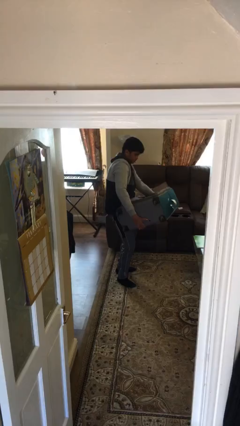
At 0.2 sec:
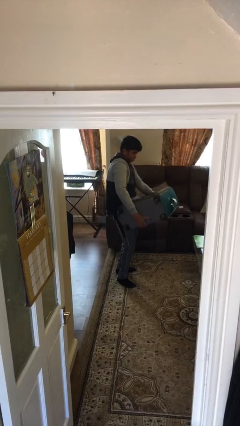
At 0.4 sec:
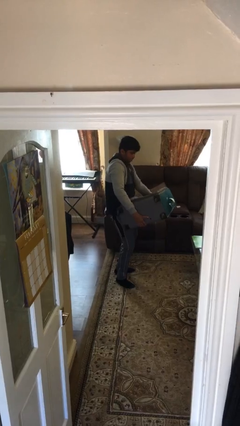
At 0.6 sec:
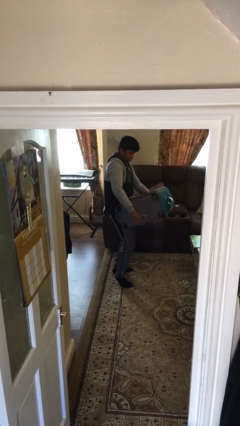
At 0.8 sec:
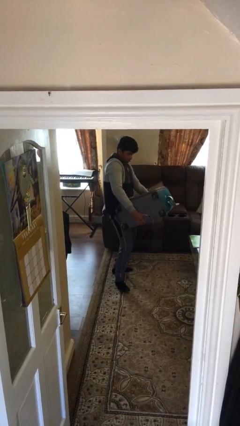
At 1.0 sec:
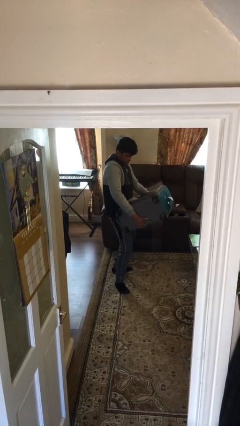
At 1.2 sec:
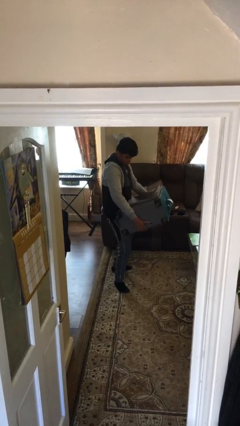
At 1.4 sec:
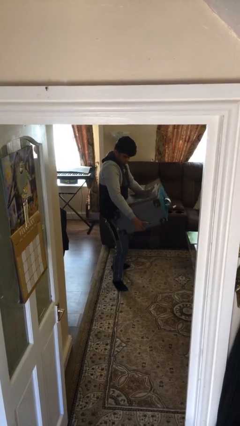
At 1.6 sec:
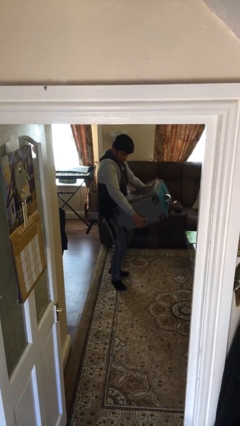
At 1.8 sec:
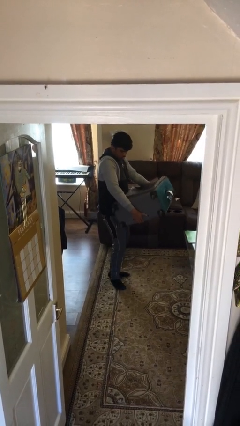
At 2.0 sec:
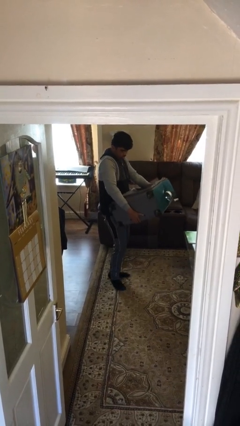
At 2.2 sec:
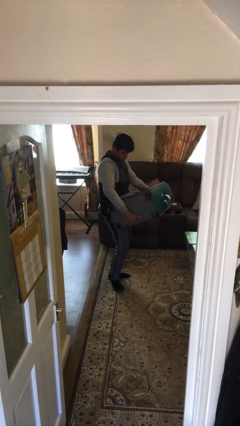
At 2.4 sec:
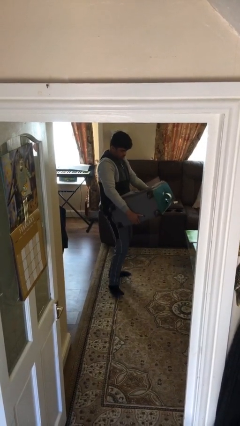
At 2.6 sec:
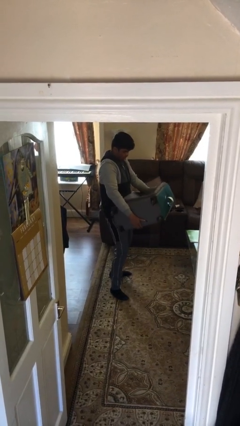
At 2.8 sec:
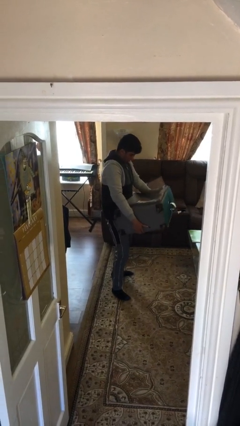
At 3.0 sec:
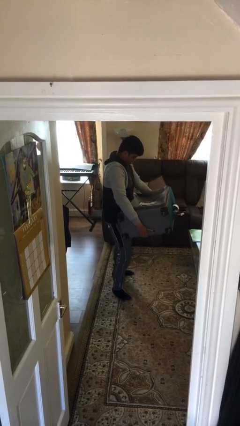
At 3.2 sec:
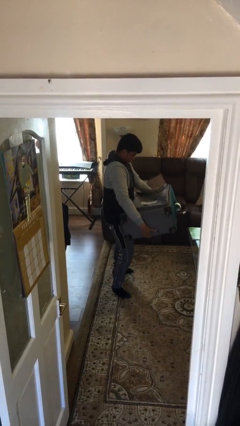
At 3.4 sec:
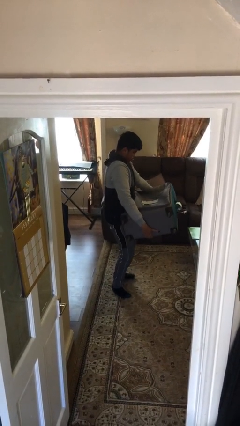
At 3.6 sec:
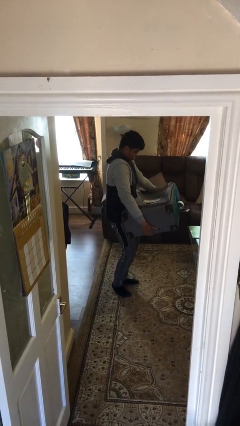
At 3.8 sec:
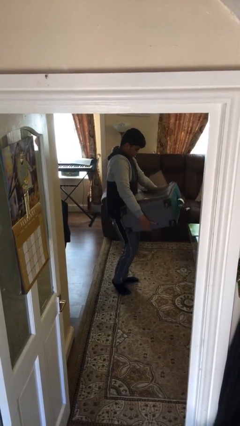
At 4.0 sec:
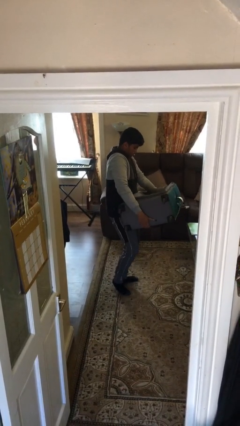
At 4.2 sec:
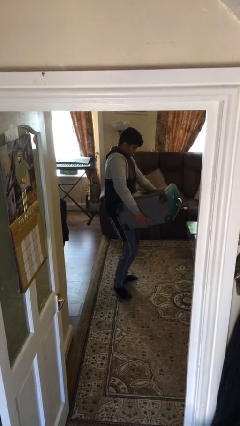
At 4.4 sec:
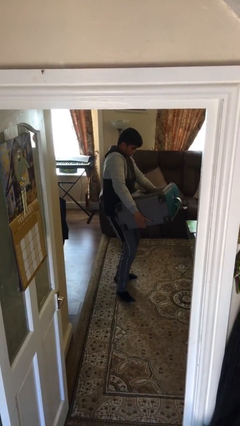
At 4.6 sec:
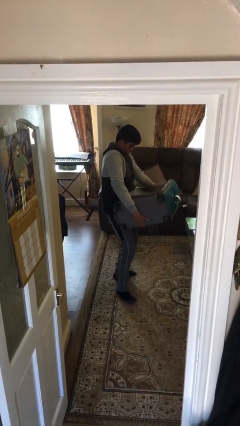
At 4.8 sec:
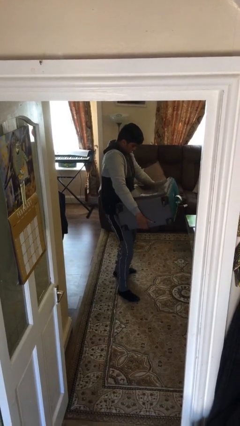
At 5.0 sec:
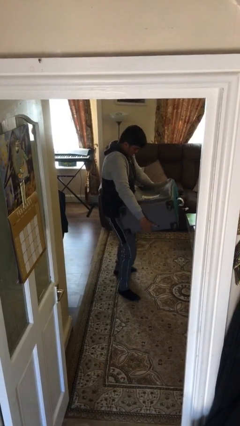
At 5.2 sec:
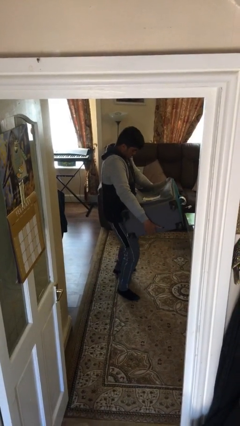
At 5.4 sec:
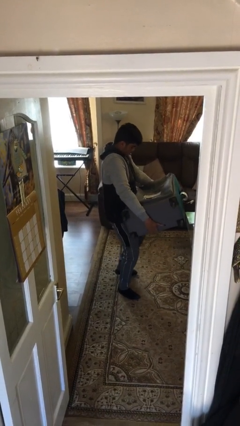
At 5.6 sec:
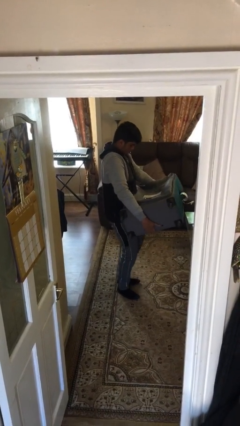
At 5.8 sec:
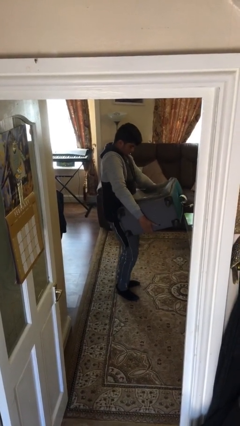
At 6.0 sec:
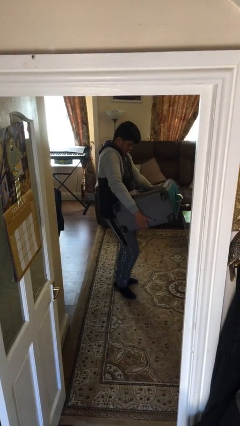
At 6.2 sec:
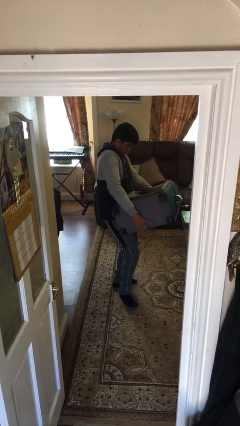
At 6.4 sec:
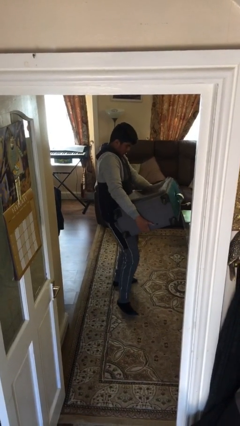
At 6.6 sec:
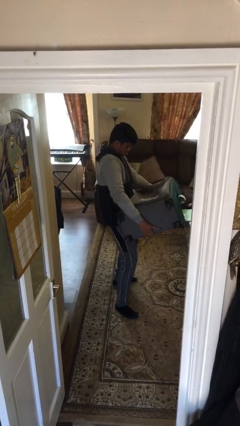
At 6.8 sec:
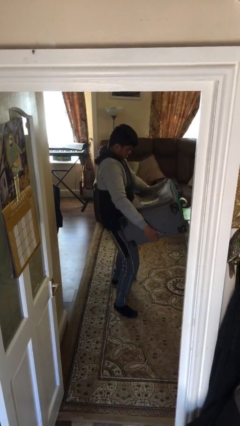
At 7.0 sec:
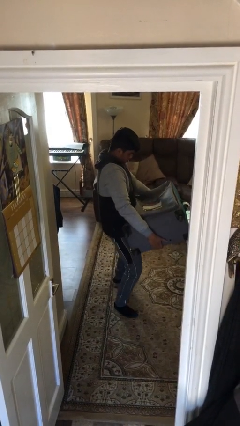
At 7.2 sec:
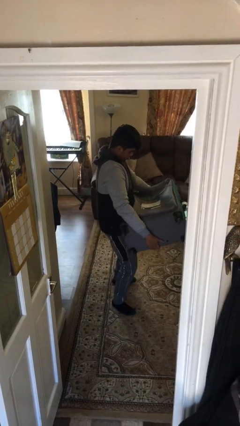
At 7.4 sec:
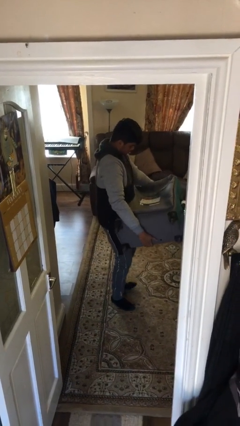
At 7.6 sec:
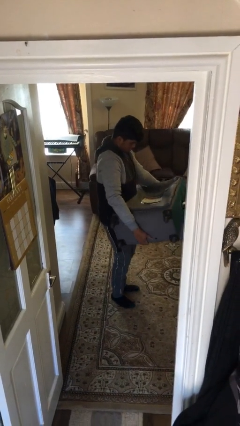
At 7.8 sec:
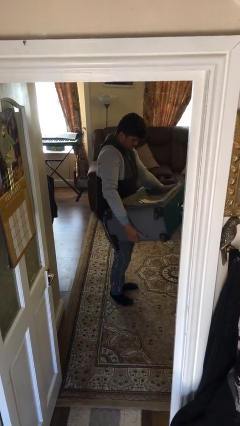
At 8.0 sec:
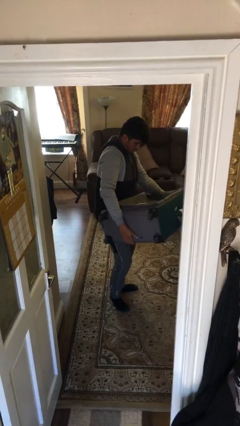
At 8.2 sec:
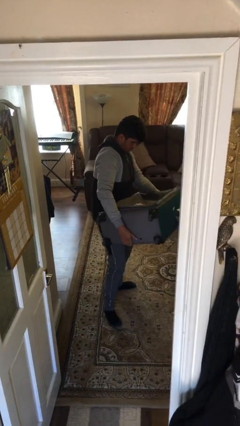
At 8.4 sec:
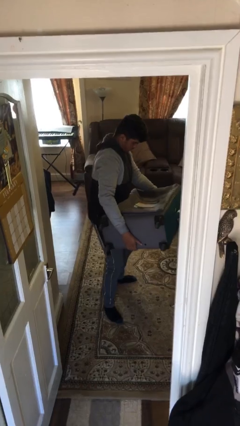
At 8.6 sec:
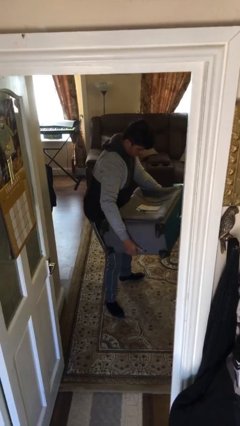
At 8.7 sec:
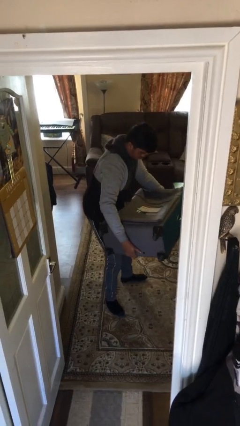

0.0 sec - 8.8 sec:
person carries heavy object

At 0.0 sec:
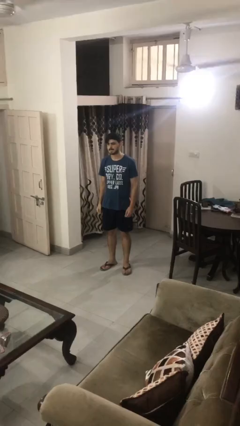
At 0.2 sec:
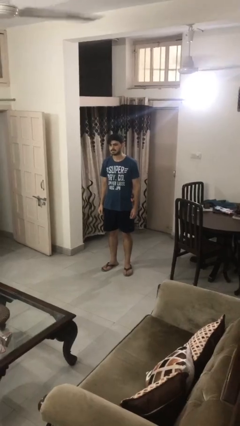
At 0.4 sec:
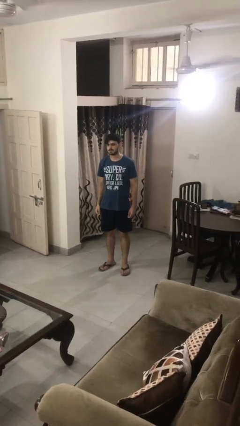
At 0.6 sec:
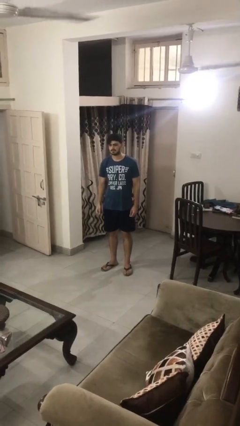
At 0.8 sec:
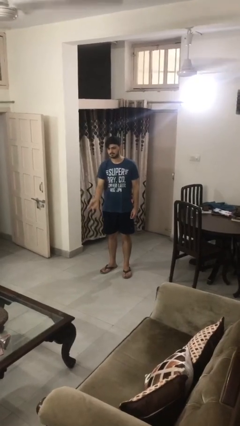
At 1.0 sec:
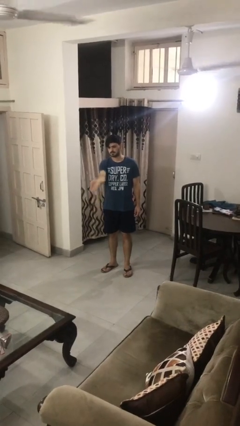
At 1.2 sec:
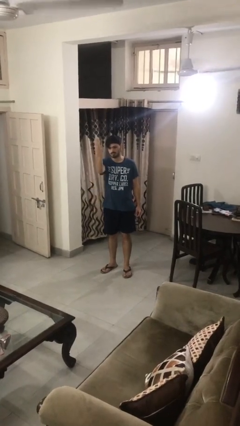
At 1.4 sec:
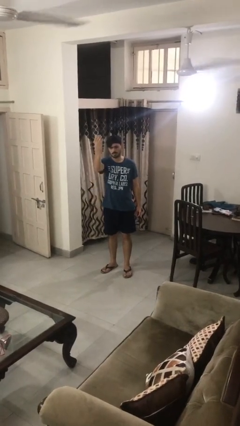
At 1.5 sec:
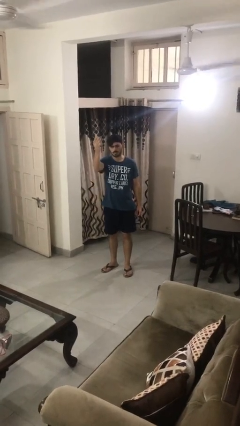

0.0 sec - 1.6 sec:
person gestures swipe up

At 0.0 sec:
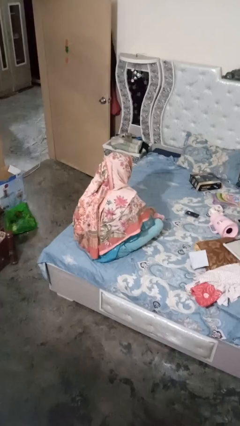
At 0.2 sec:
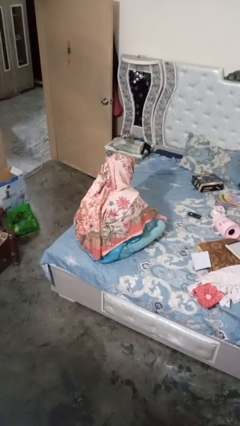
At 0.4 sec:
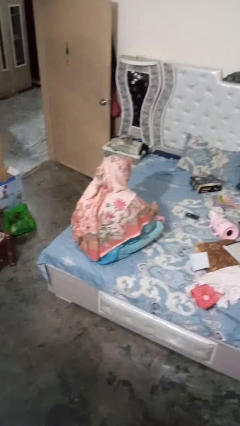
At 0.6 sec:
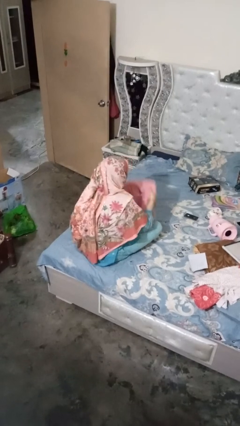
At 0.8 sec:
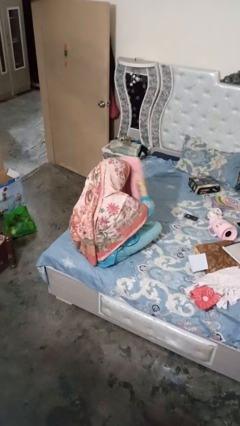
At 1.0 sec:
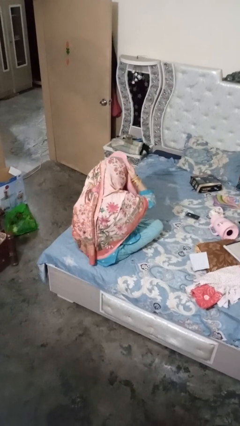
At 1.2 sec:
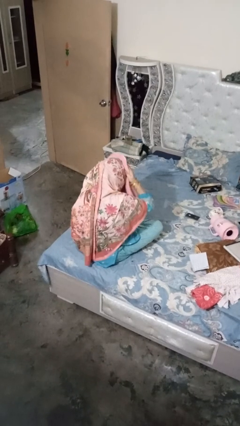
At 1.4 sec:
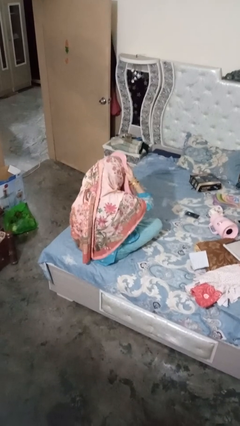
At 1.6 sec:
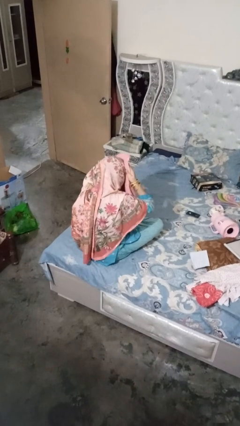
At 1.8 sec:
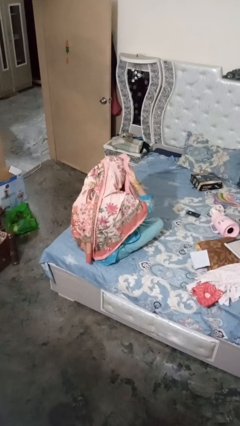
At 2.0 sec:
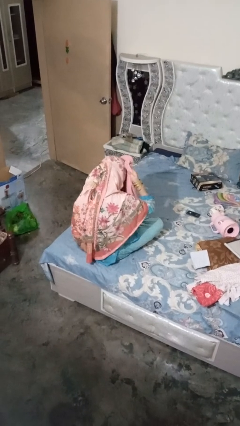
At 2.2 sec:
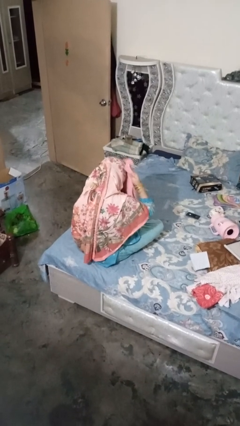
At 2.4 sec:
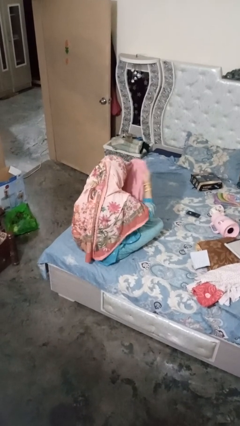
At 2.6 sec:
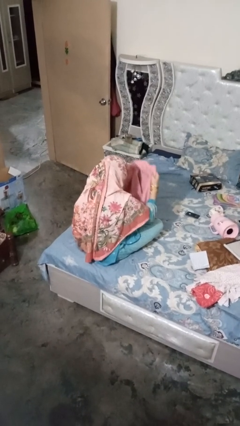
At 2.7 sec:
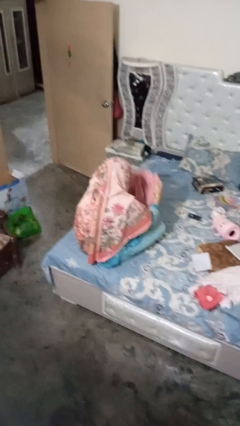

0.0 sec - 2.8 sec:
person dries hair with hairdryer

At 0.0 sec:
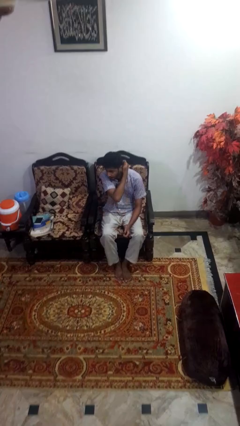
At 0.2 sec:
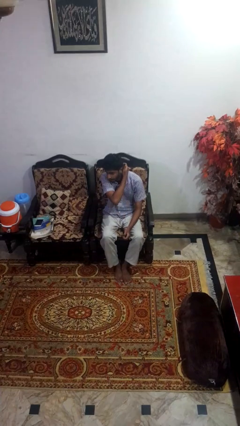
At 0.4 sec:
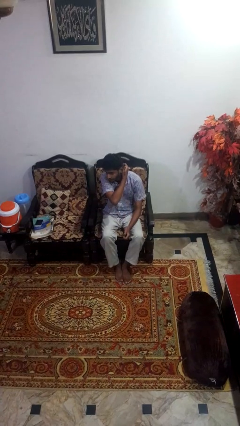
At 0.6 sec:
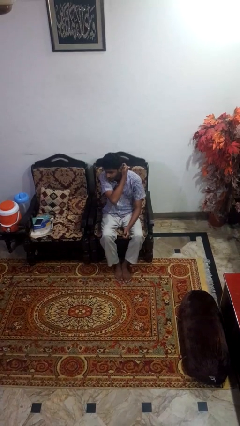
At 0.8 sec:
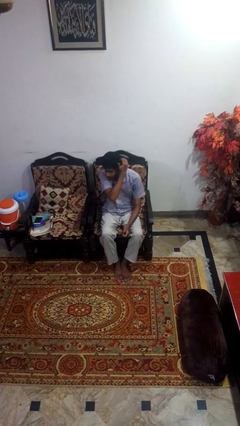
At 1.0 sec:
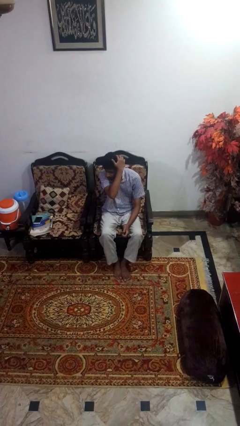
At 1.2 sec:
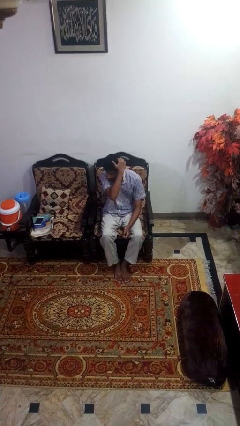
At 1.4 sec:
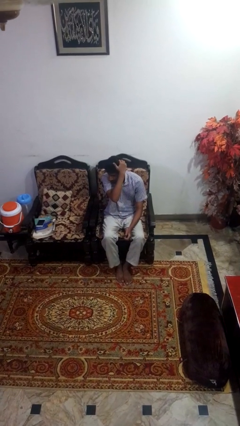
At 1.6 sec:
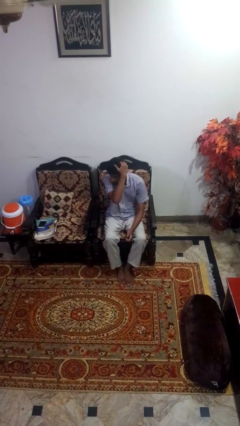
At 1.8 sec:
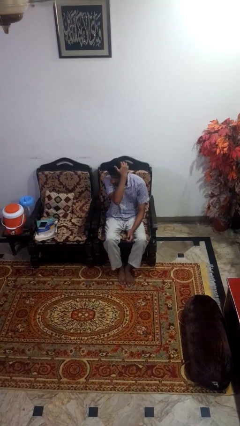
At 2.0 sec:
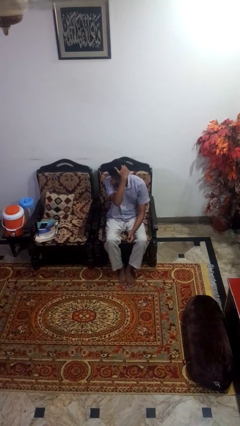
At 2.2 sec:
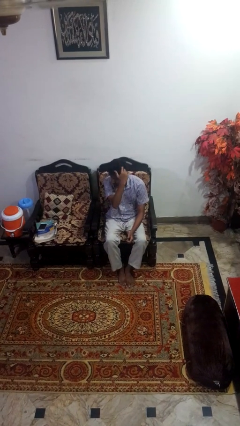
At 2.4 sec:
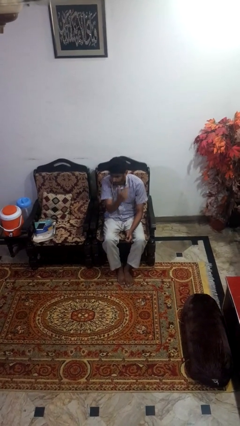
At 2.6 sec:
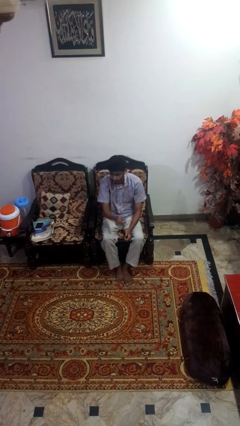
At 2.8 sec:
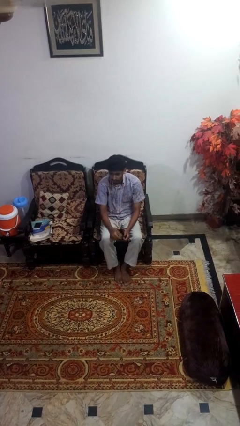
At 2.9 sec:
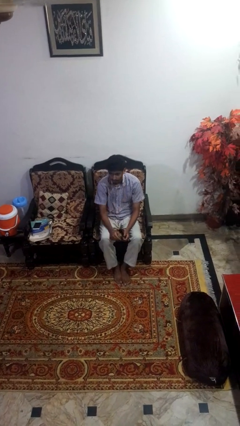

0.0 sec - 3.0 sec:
person scratches face

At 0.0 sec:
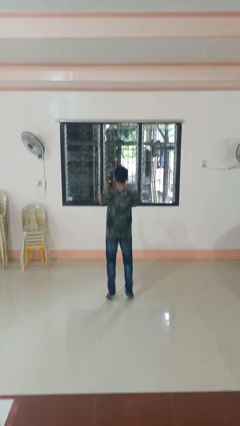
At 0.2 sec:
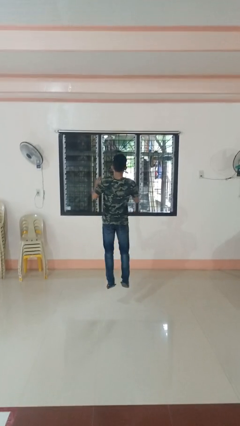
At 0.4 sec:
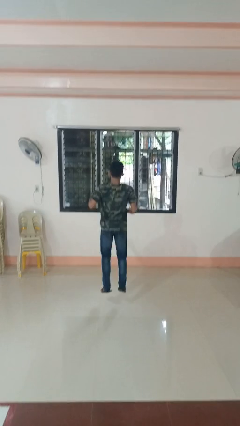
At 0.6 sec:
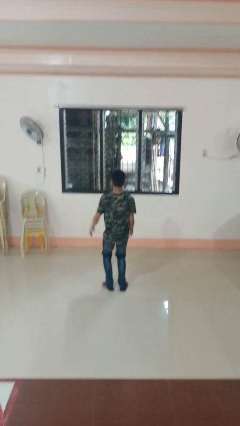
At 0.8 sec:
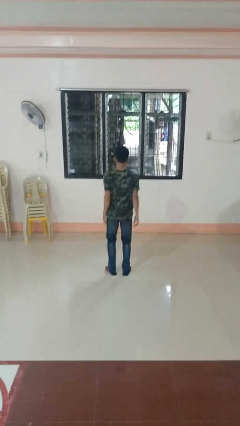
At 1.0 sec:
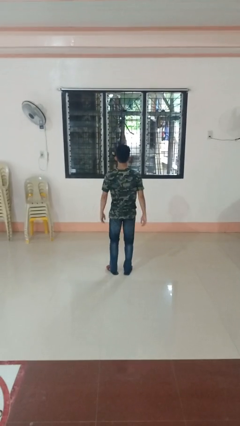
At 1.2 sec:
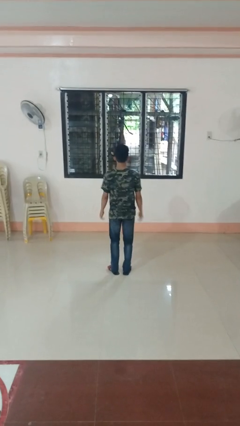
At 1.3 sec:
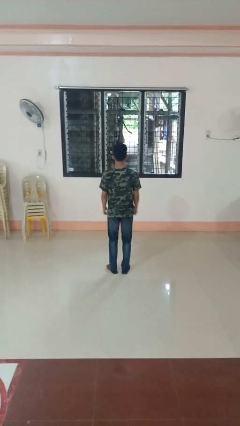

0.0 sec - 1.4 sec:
person jumps
